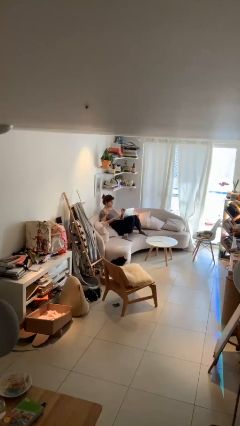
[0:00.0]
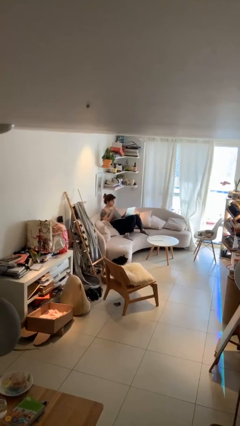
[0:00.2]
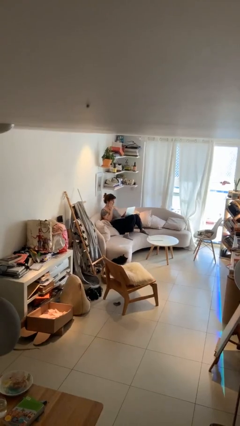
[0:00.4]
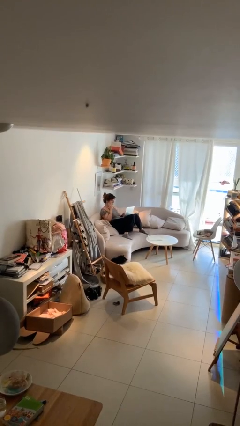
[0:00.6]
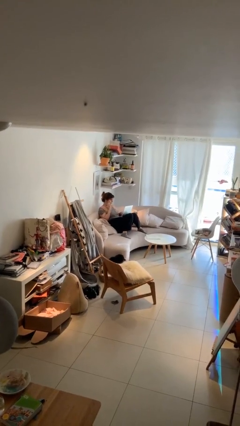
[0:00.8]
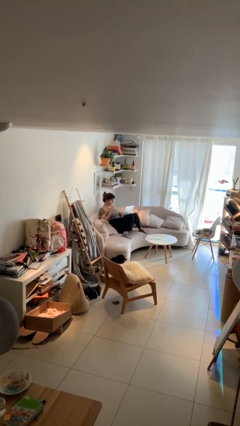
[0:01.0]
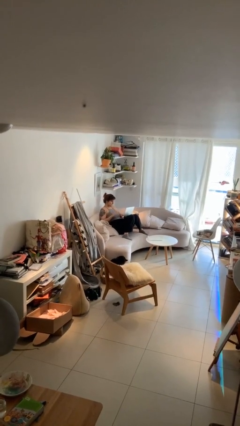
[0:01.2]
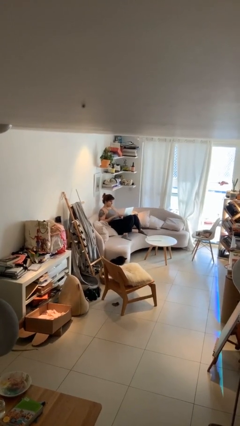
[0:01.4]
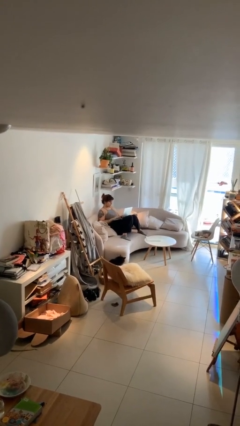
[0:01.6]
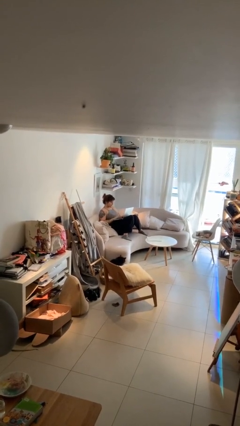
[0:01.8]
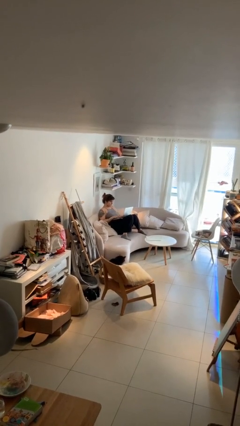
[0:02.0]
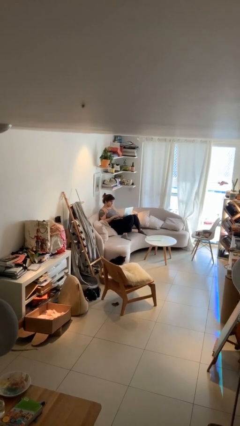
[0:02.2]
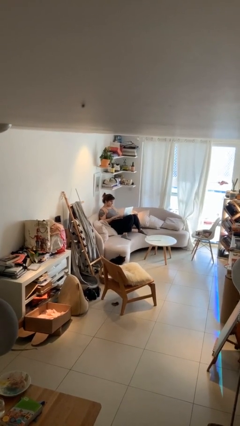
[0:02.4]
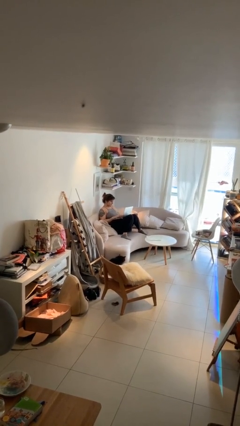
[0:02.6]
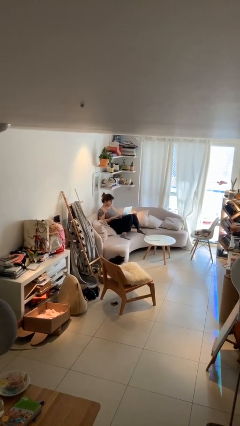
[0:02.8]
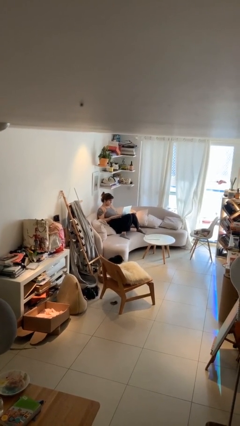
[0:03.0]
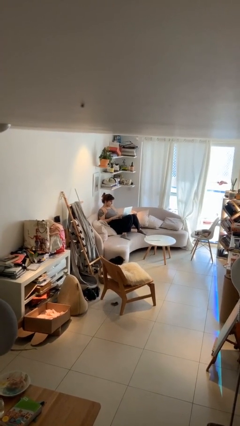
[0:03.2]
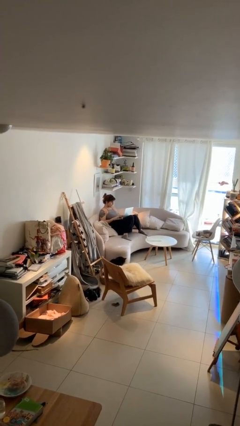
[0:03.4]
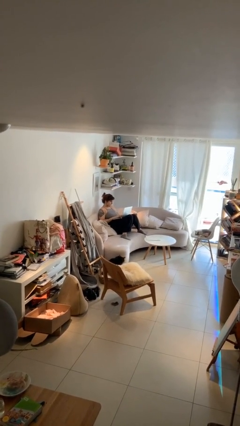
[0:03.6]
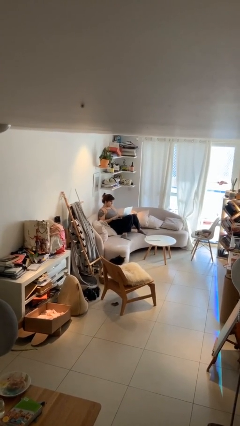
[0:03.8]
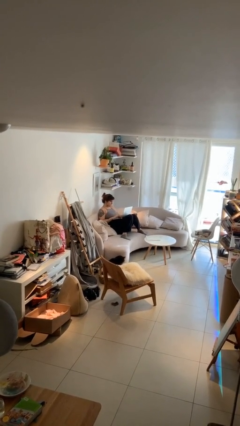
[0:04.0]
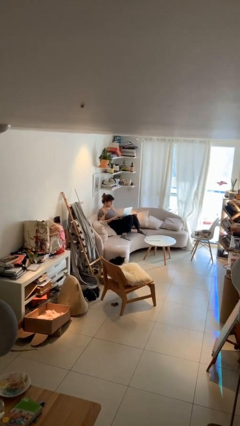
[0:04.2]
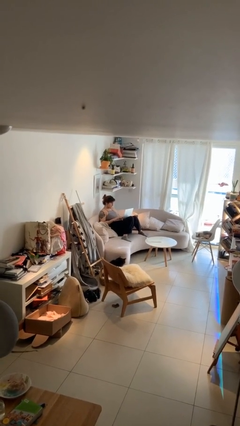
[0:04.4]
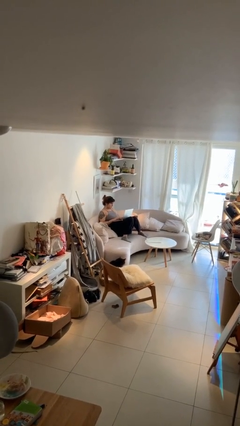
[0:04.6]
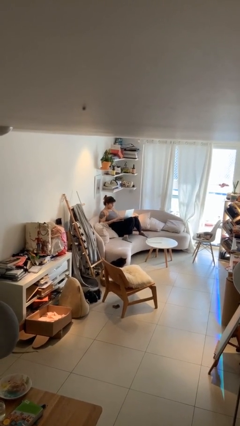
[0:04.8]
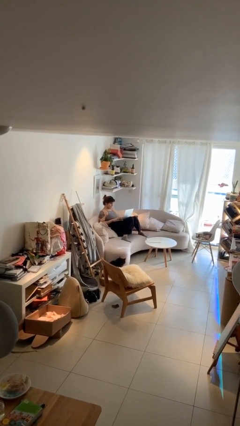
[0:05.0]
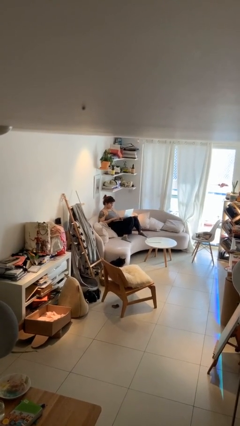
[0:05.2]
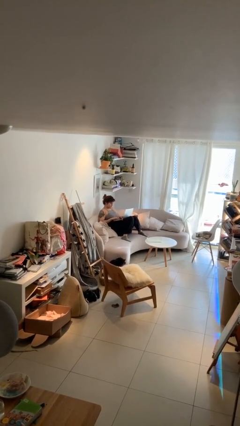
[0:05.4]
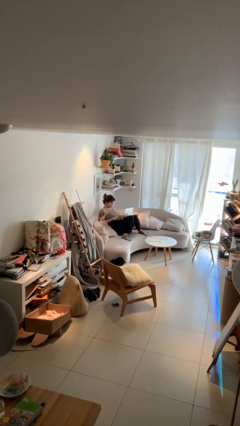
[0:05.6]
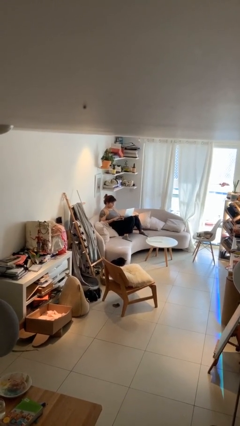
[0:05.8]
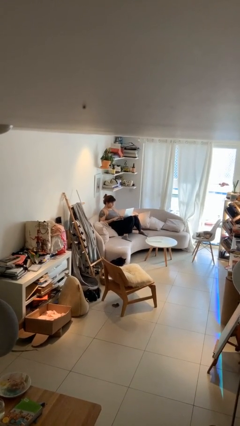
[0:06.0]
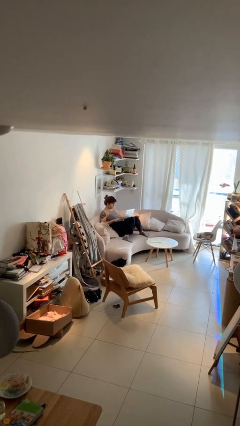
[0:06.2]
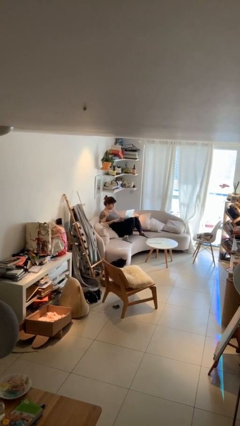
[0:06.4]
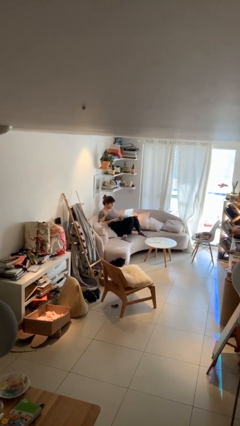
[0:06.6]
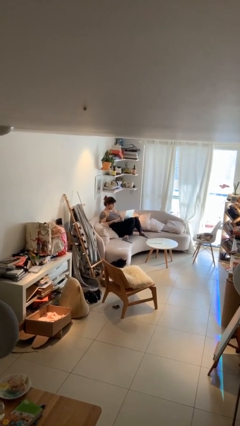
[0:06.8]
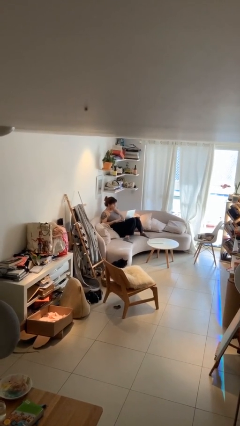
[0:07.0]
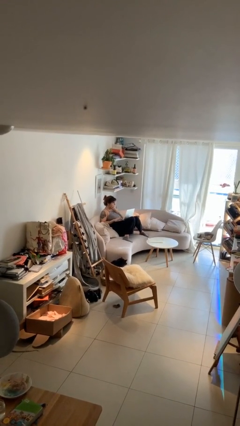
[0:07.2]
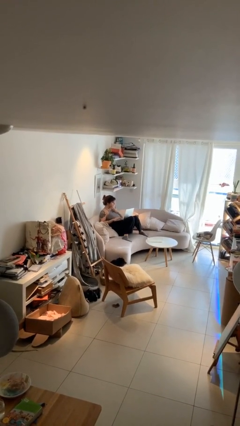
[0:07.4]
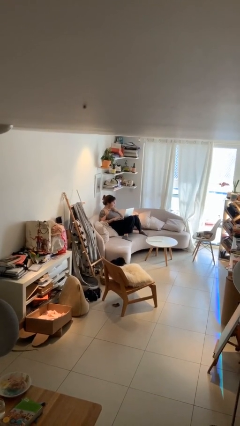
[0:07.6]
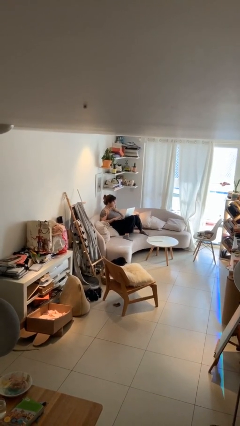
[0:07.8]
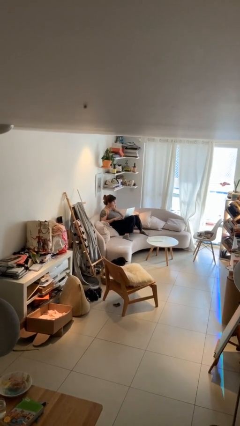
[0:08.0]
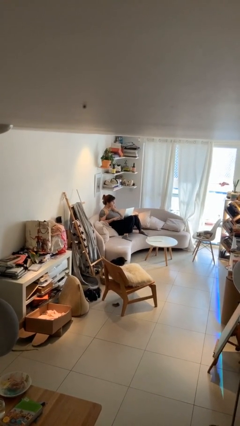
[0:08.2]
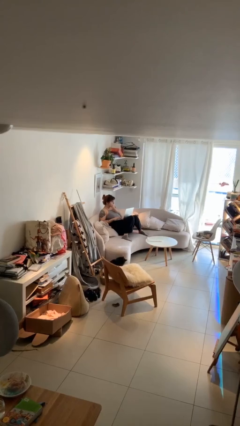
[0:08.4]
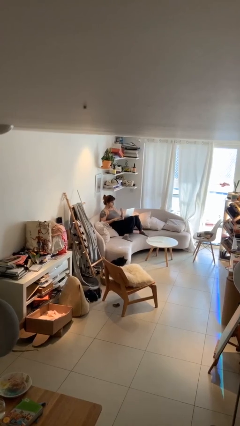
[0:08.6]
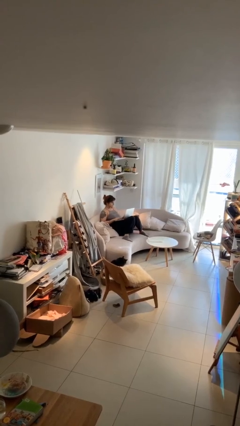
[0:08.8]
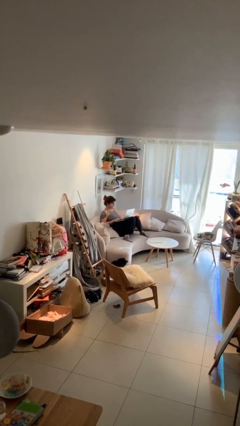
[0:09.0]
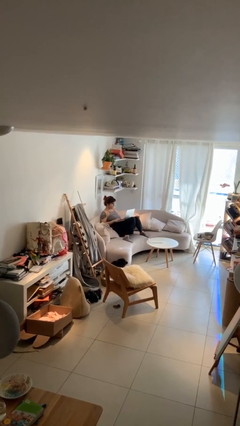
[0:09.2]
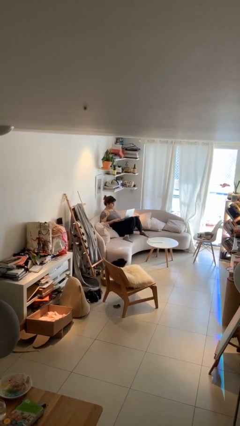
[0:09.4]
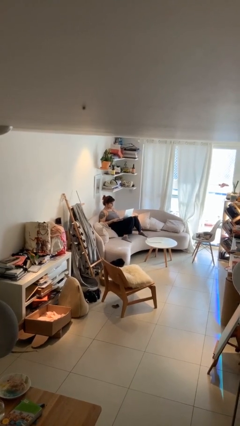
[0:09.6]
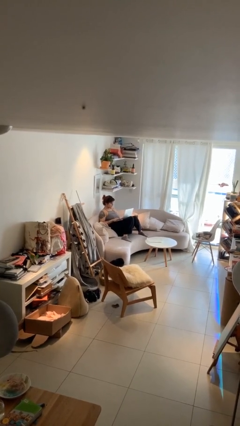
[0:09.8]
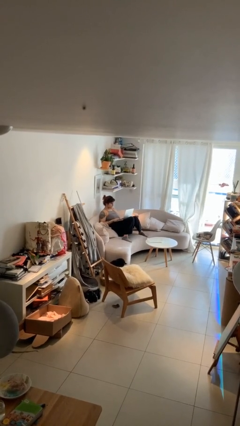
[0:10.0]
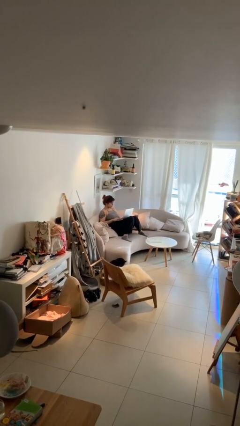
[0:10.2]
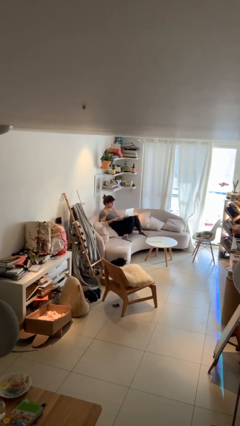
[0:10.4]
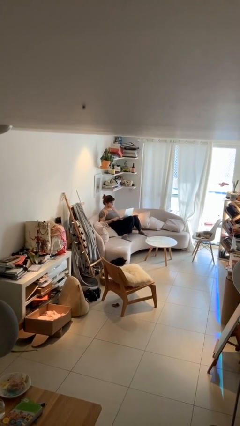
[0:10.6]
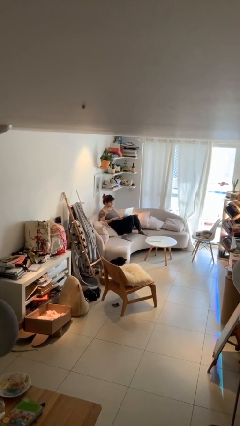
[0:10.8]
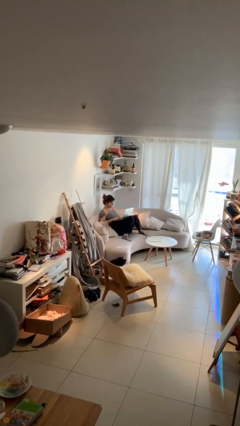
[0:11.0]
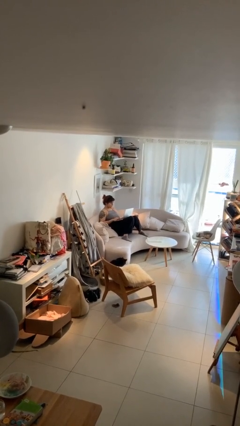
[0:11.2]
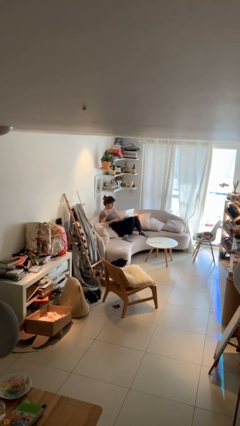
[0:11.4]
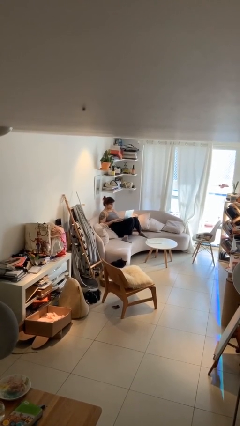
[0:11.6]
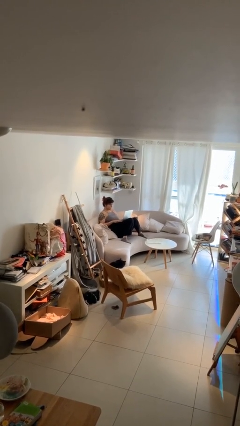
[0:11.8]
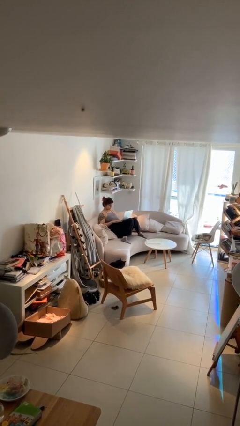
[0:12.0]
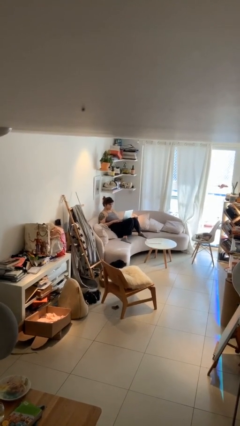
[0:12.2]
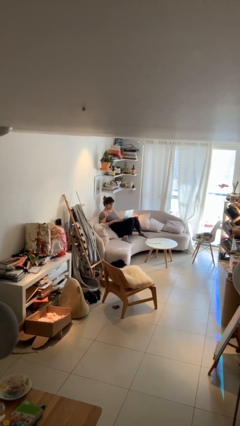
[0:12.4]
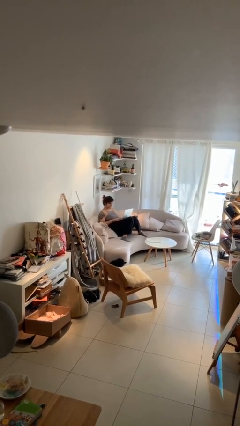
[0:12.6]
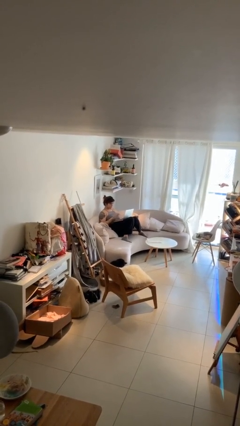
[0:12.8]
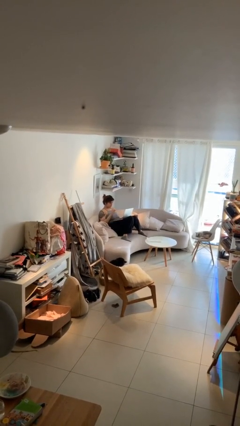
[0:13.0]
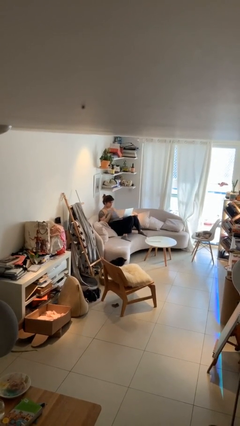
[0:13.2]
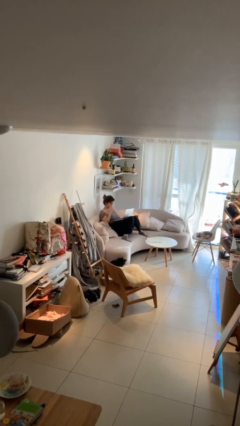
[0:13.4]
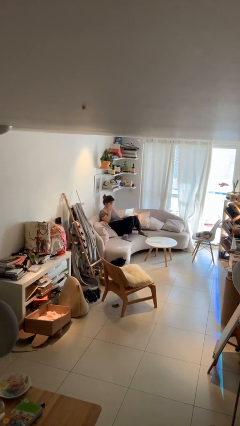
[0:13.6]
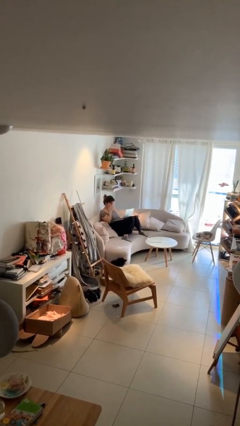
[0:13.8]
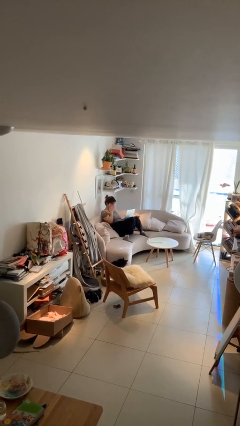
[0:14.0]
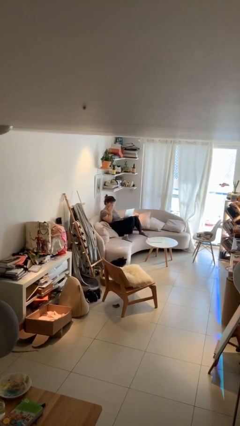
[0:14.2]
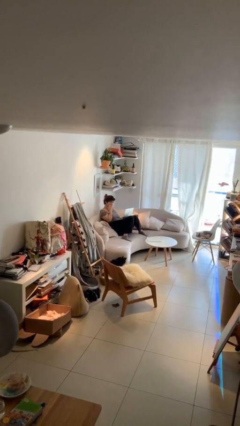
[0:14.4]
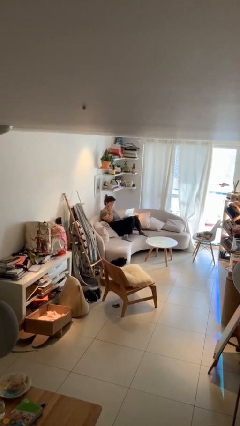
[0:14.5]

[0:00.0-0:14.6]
person interacts with laptop

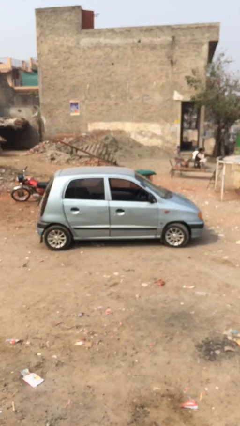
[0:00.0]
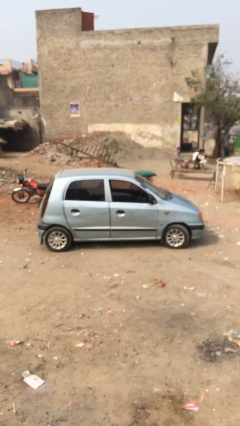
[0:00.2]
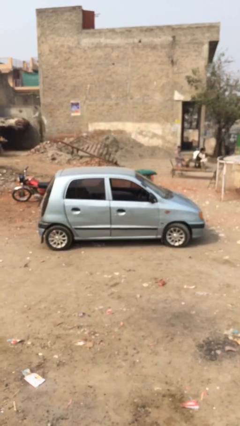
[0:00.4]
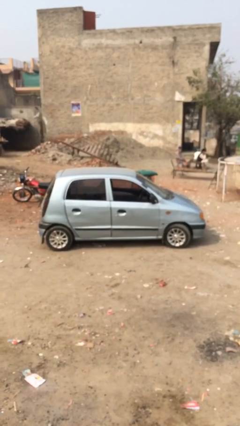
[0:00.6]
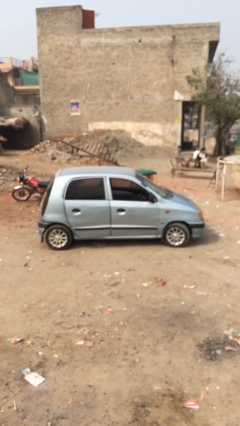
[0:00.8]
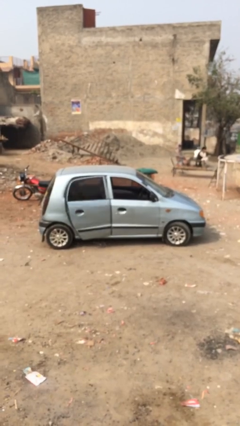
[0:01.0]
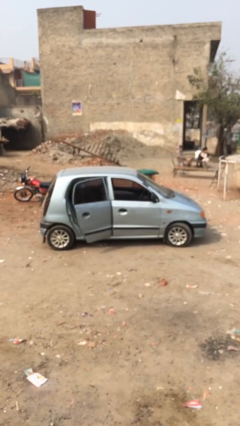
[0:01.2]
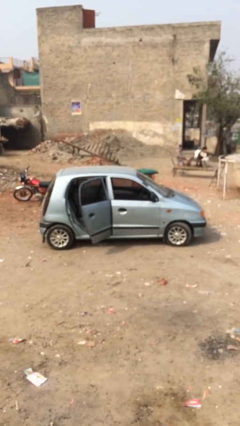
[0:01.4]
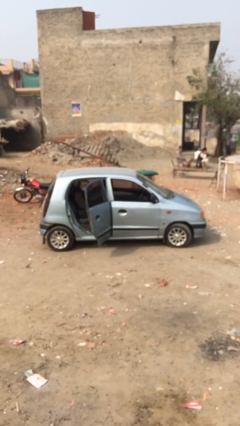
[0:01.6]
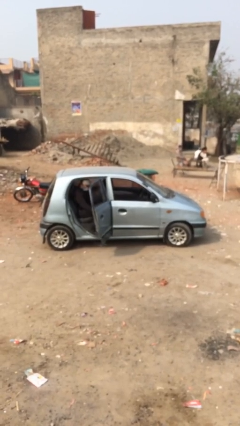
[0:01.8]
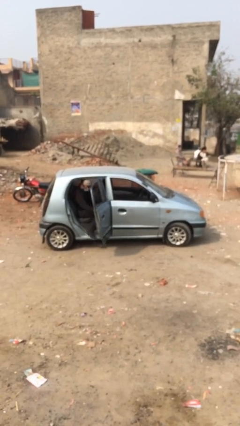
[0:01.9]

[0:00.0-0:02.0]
car drops off person

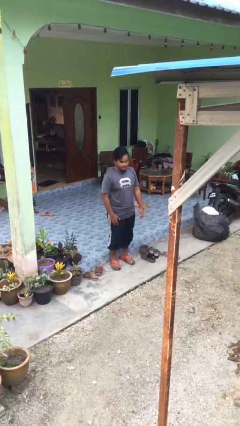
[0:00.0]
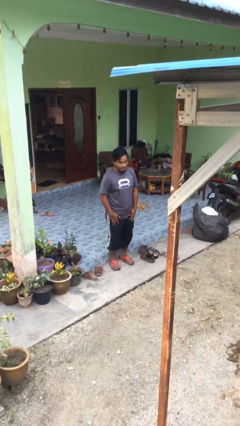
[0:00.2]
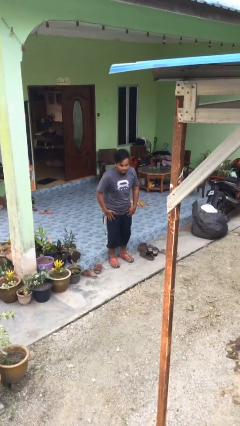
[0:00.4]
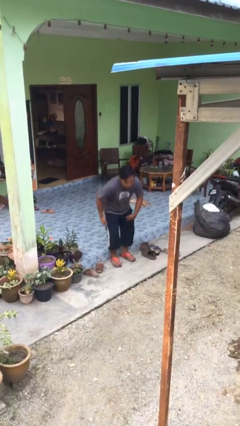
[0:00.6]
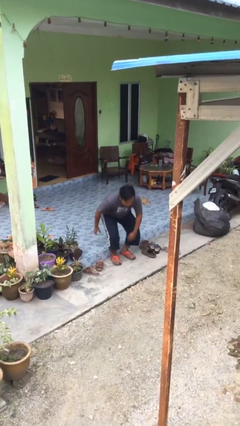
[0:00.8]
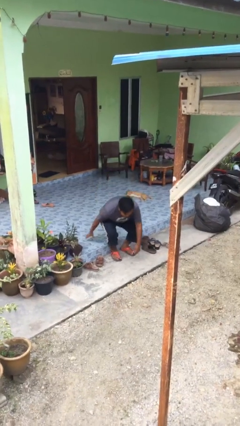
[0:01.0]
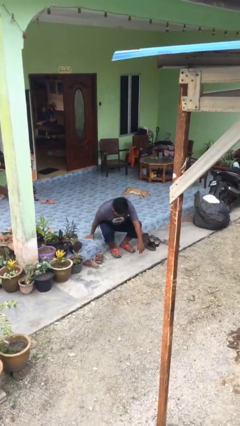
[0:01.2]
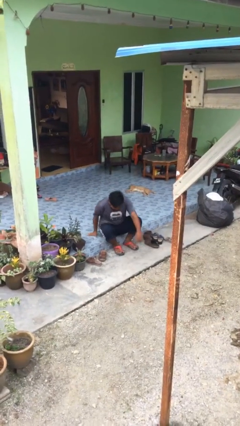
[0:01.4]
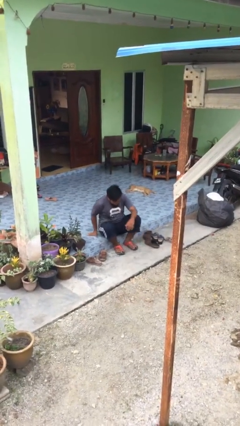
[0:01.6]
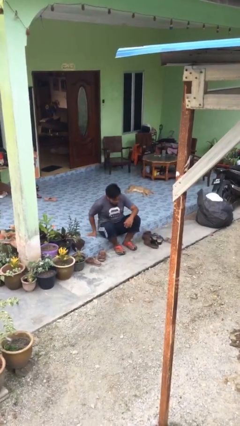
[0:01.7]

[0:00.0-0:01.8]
person sits down

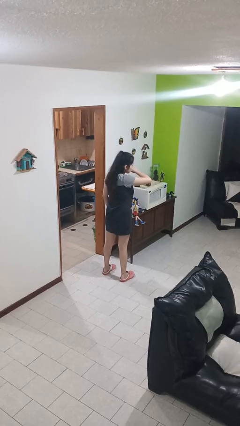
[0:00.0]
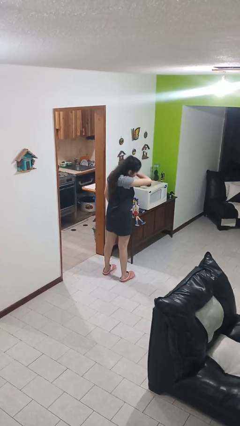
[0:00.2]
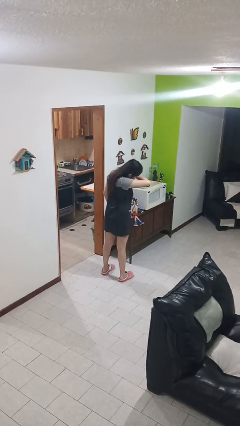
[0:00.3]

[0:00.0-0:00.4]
person sneezes into arm
